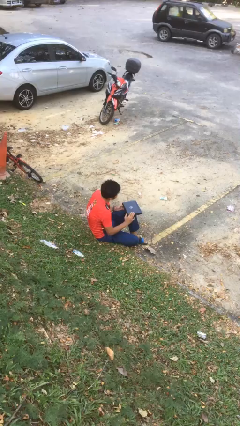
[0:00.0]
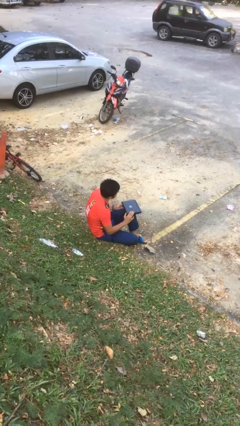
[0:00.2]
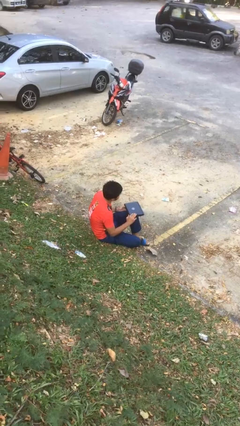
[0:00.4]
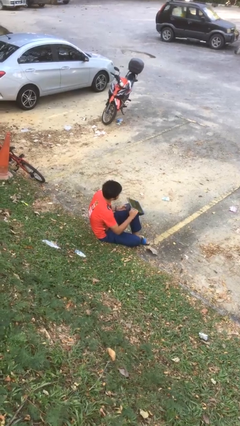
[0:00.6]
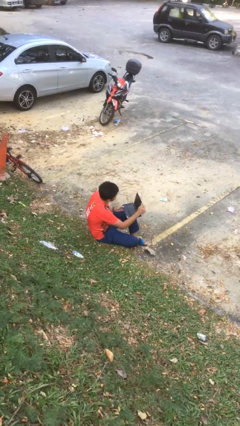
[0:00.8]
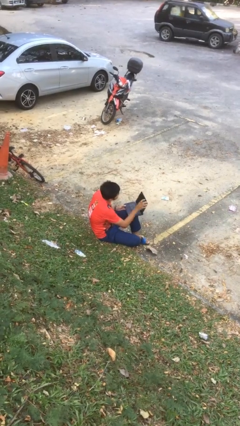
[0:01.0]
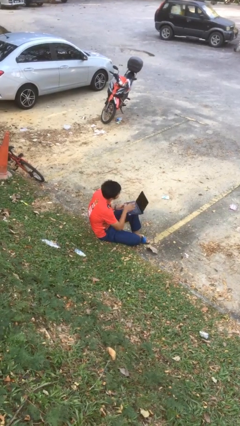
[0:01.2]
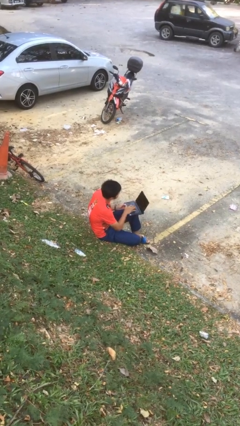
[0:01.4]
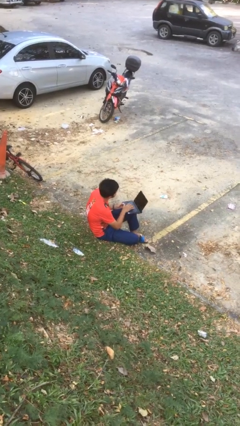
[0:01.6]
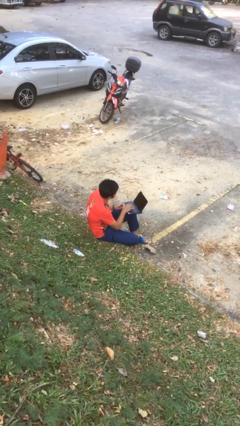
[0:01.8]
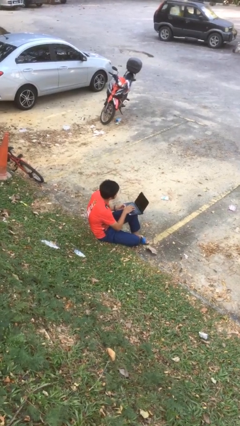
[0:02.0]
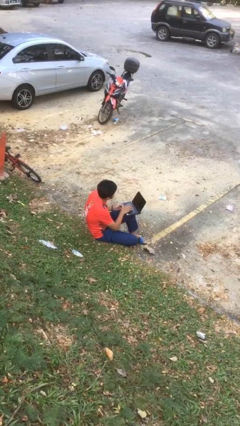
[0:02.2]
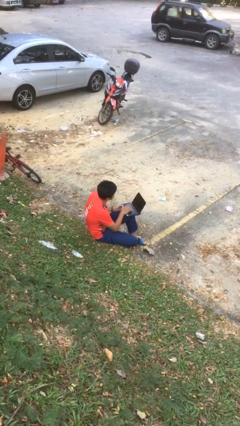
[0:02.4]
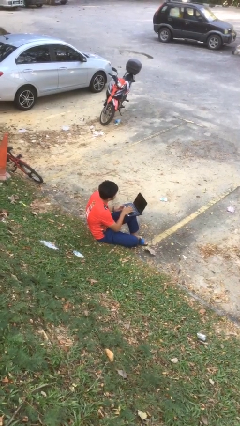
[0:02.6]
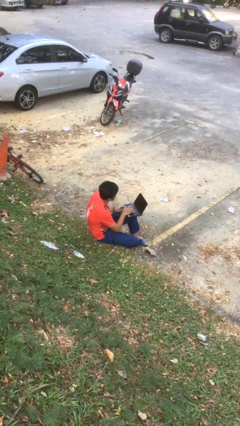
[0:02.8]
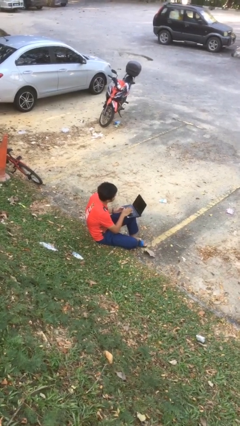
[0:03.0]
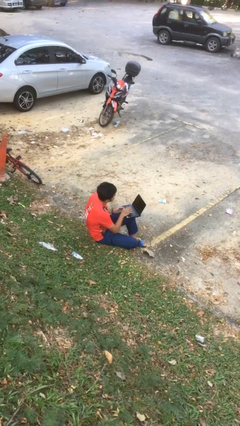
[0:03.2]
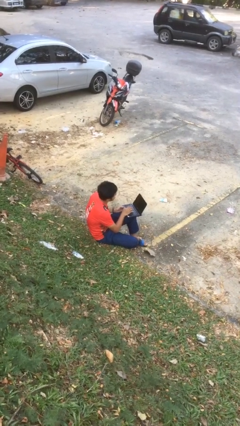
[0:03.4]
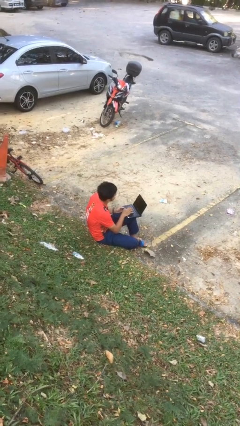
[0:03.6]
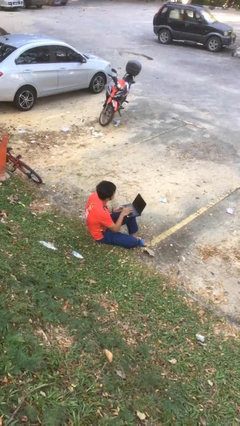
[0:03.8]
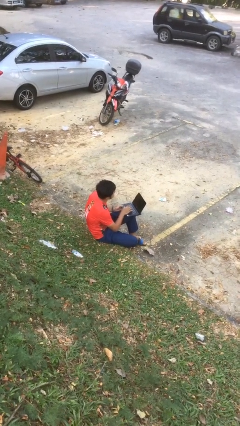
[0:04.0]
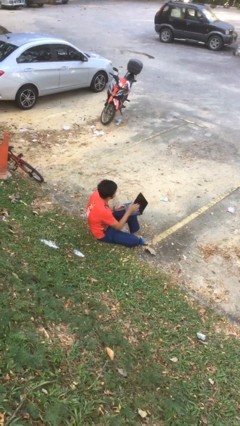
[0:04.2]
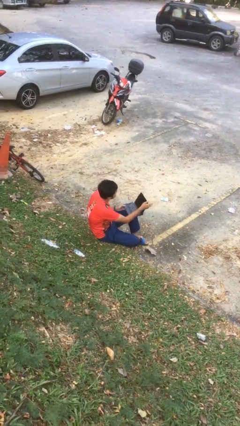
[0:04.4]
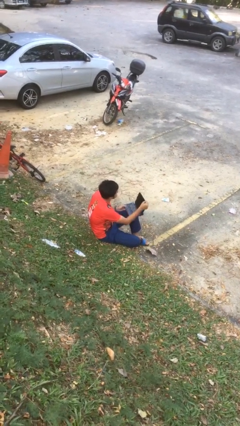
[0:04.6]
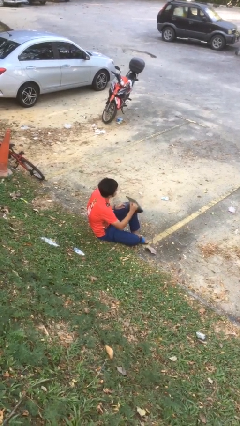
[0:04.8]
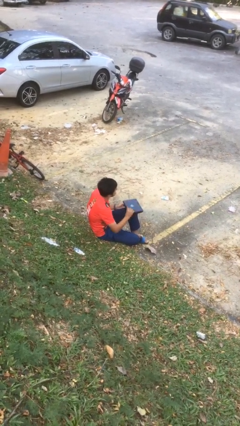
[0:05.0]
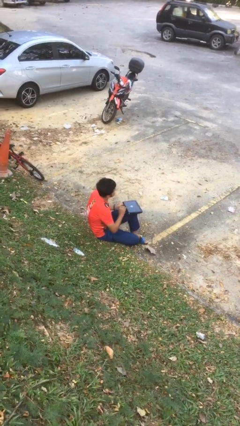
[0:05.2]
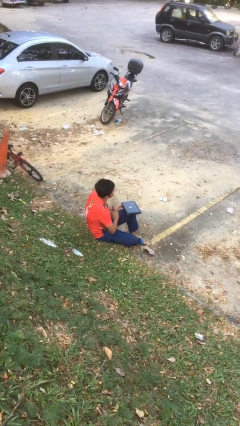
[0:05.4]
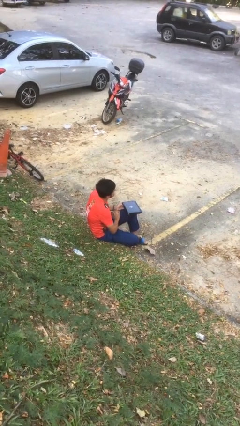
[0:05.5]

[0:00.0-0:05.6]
person interacts with laptop

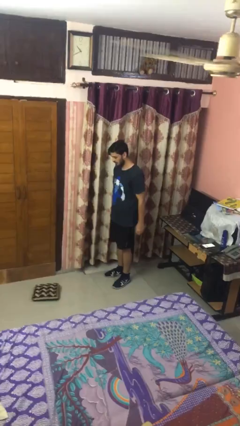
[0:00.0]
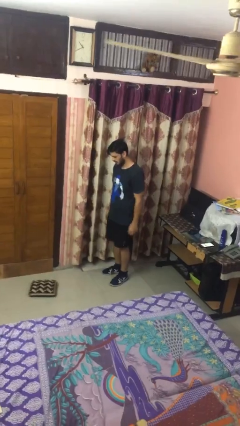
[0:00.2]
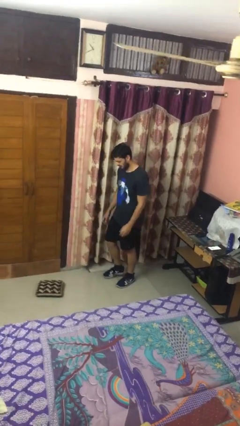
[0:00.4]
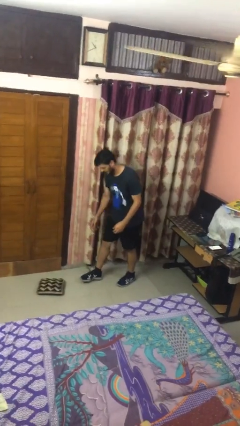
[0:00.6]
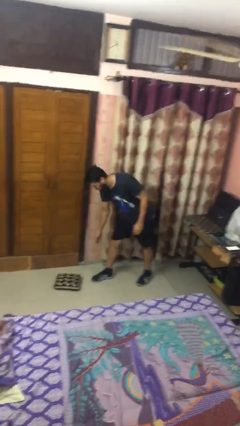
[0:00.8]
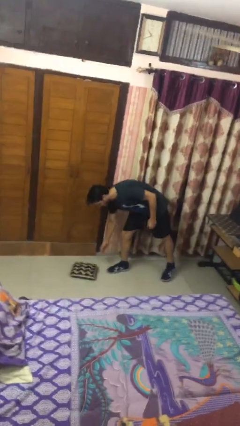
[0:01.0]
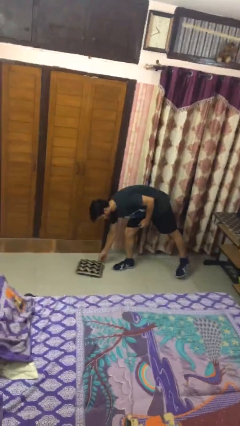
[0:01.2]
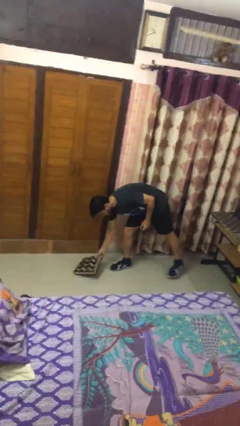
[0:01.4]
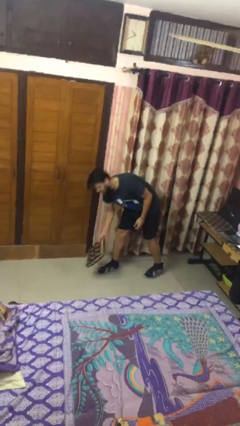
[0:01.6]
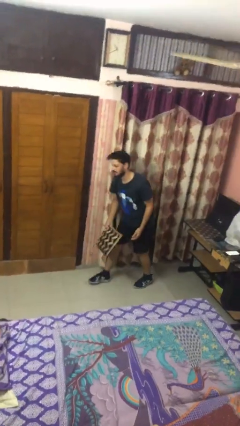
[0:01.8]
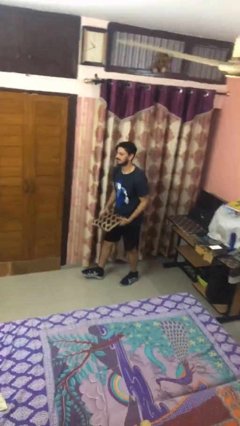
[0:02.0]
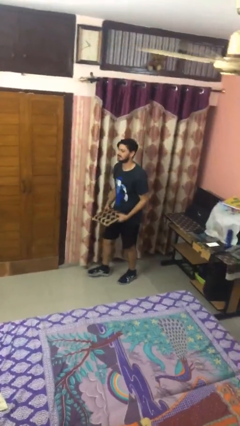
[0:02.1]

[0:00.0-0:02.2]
person picks up object from floor

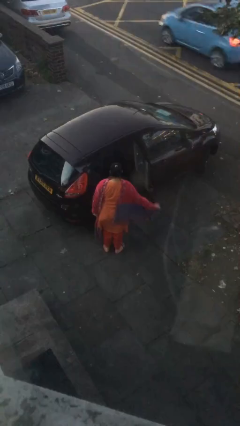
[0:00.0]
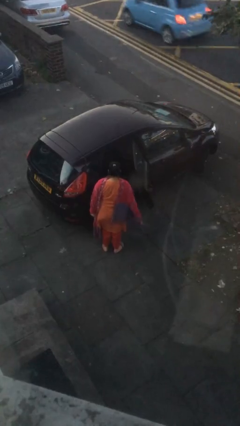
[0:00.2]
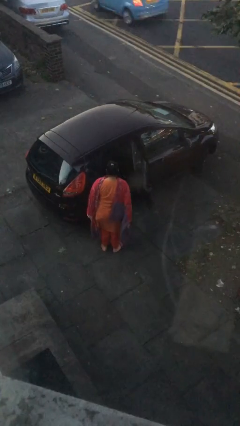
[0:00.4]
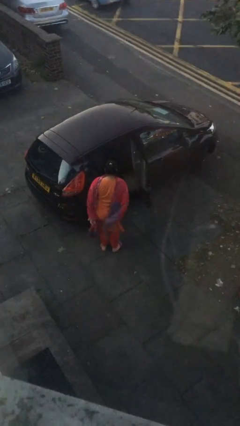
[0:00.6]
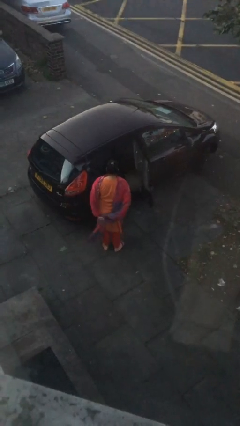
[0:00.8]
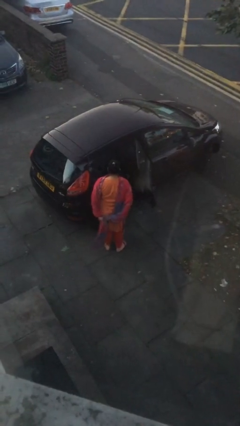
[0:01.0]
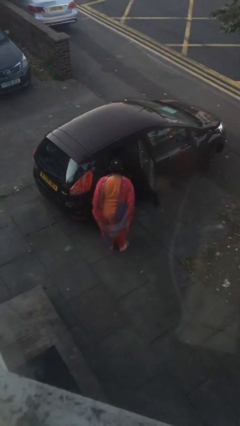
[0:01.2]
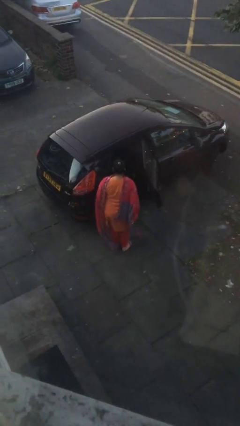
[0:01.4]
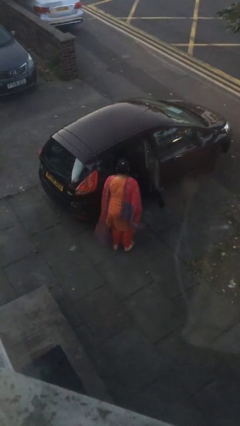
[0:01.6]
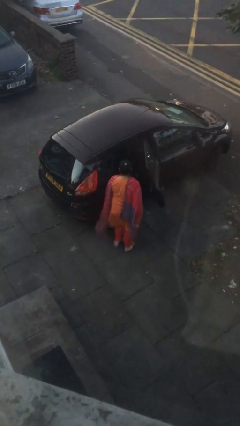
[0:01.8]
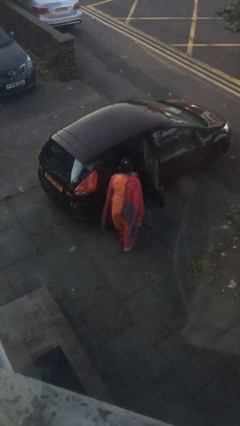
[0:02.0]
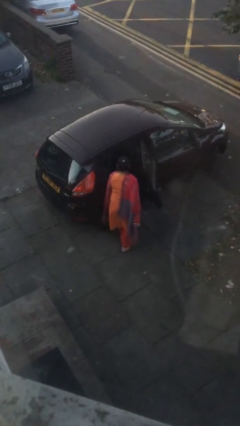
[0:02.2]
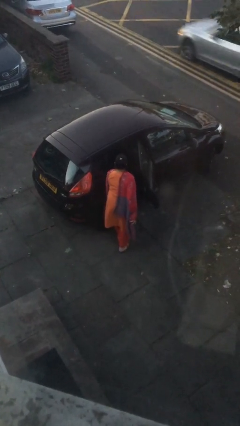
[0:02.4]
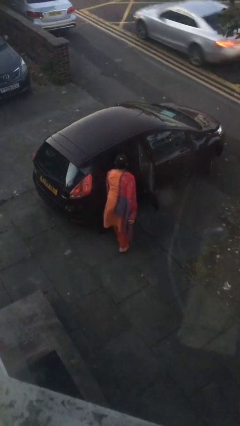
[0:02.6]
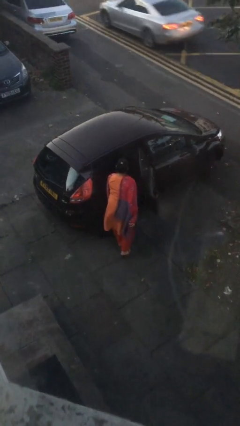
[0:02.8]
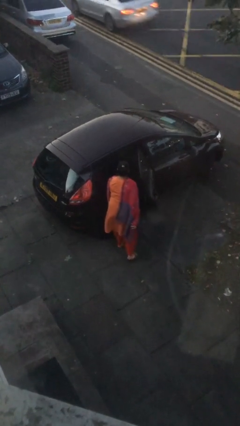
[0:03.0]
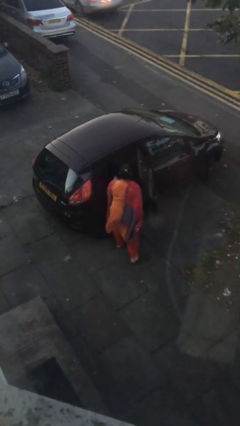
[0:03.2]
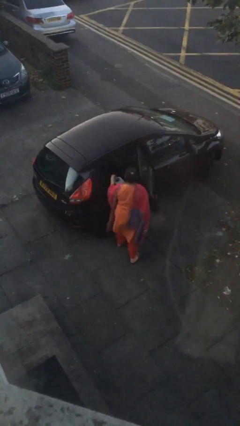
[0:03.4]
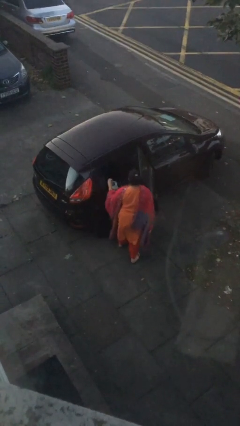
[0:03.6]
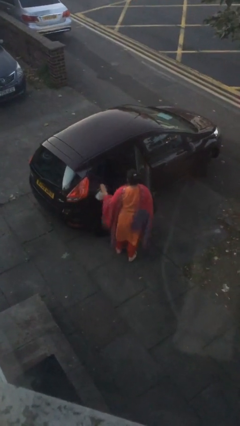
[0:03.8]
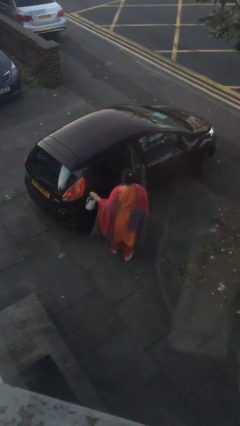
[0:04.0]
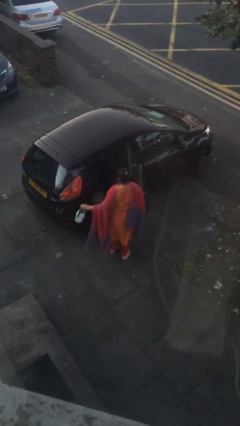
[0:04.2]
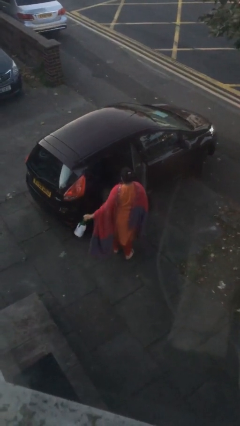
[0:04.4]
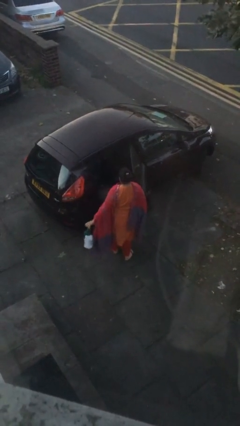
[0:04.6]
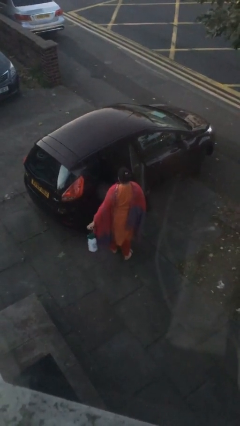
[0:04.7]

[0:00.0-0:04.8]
person unloads car

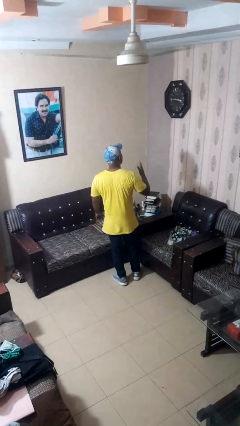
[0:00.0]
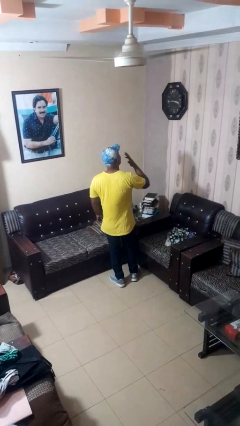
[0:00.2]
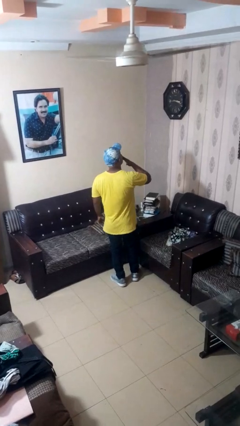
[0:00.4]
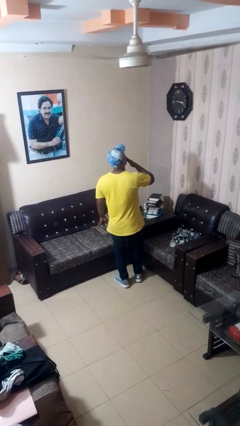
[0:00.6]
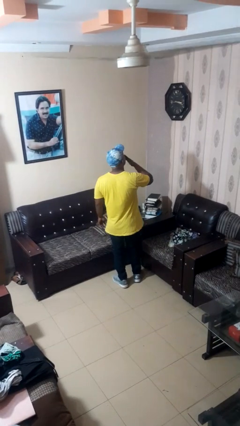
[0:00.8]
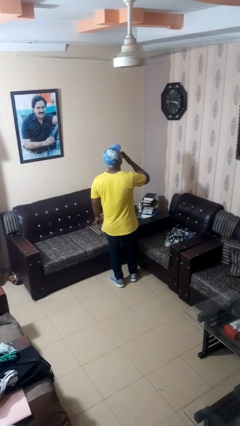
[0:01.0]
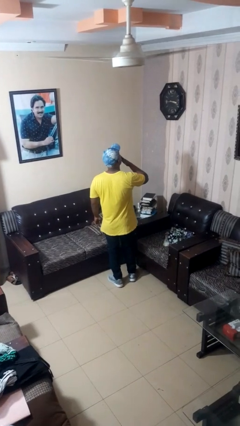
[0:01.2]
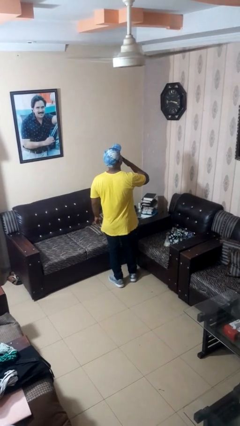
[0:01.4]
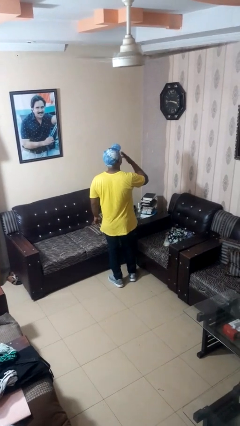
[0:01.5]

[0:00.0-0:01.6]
person yawns

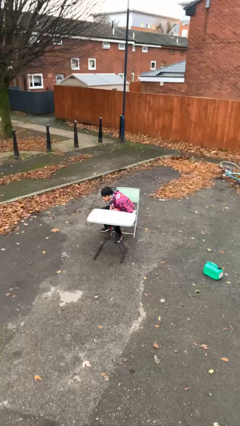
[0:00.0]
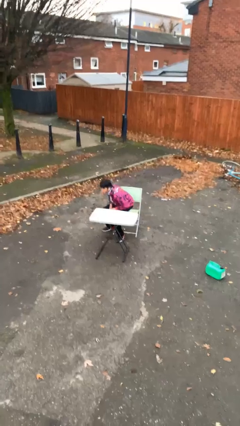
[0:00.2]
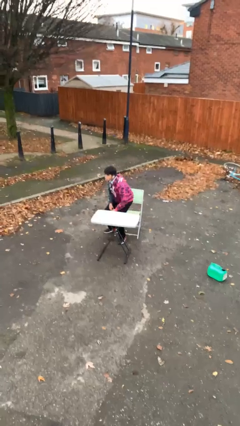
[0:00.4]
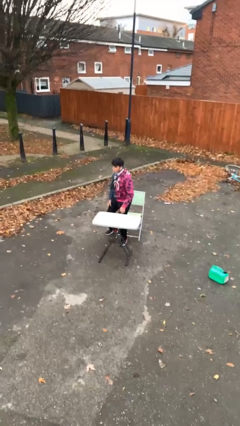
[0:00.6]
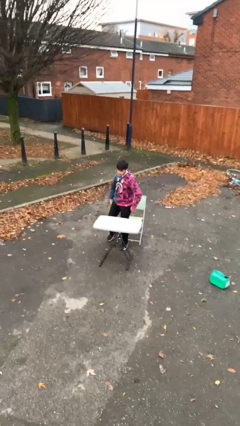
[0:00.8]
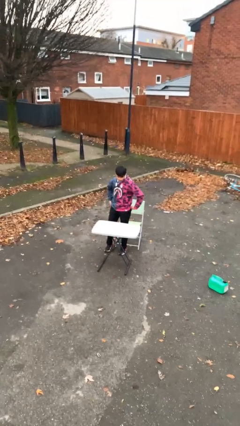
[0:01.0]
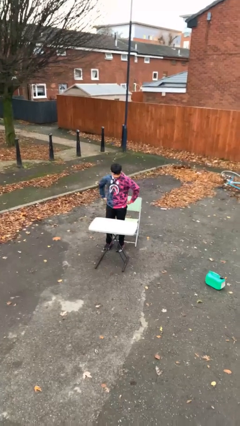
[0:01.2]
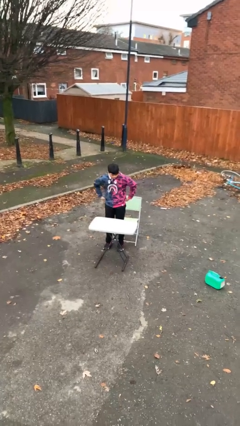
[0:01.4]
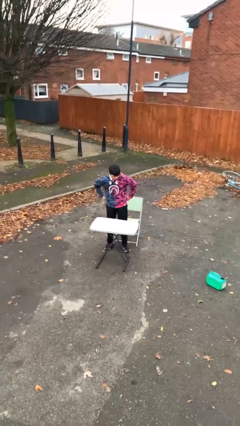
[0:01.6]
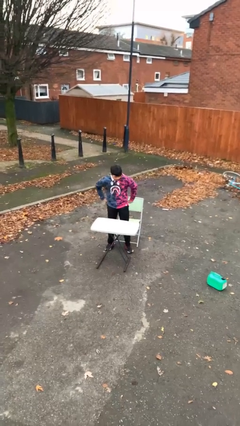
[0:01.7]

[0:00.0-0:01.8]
person stands up

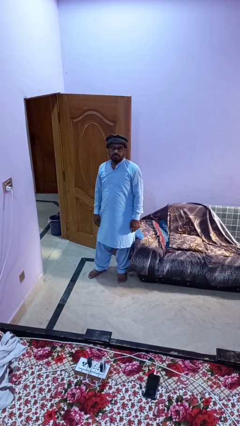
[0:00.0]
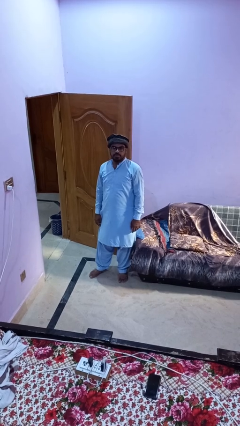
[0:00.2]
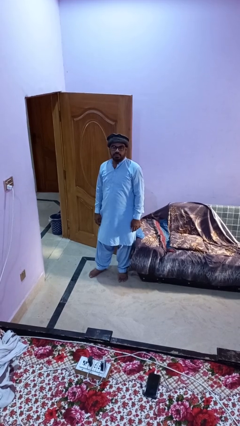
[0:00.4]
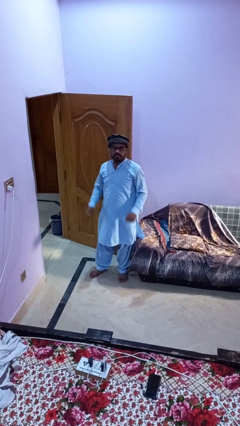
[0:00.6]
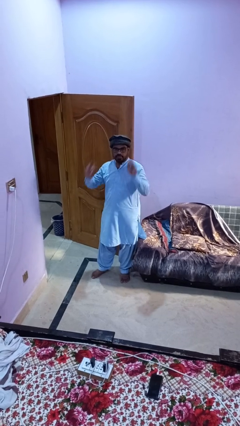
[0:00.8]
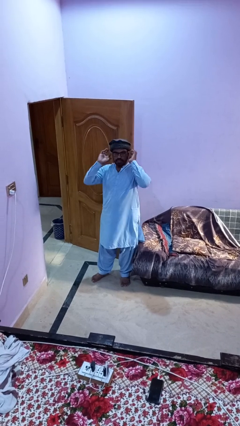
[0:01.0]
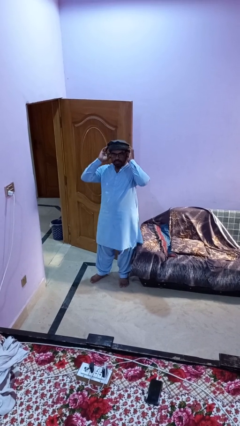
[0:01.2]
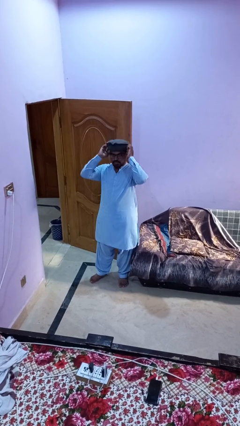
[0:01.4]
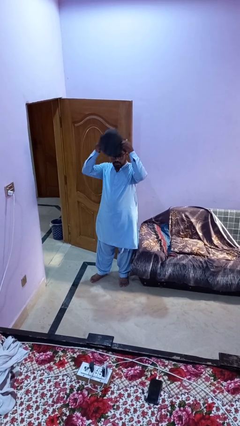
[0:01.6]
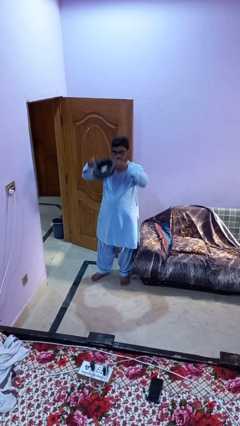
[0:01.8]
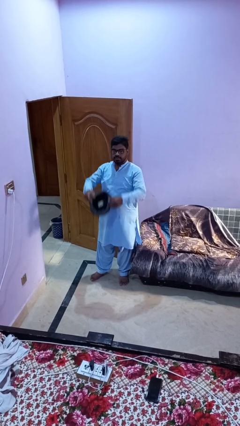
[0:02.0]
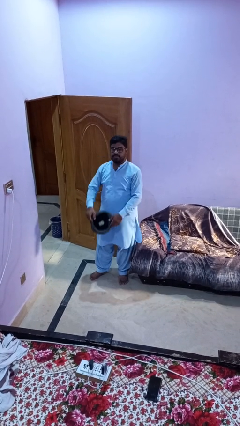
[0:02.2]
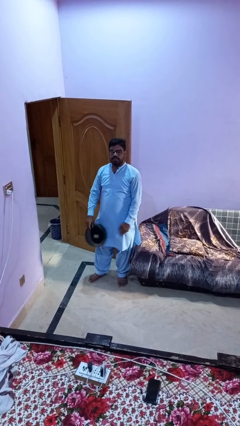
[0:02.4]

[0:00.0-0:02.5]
person takes off hat
